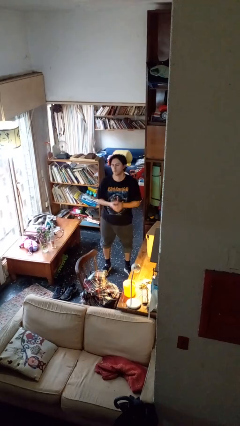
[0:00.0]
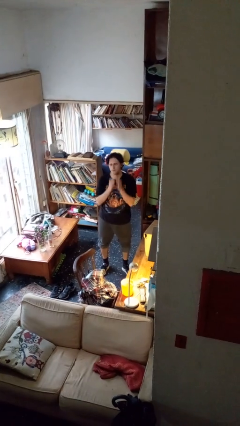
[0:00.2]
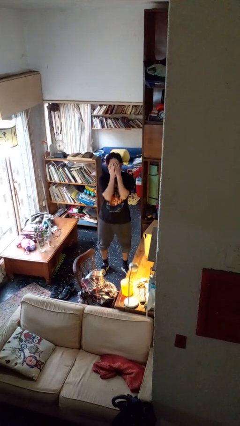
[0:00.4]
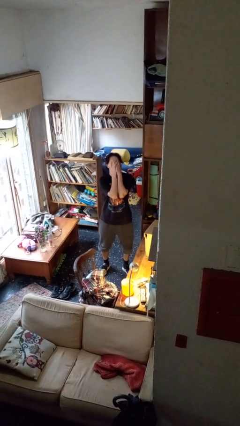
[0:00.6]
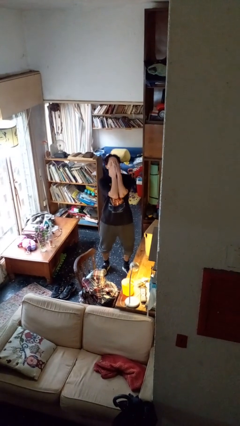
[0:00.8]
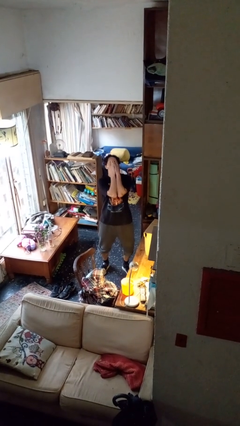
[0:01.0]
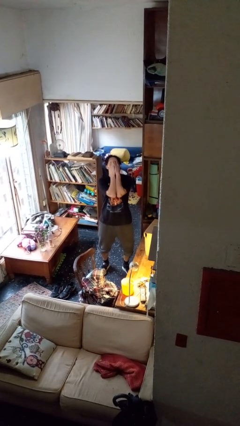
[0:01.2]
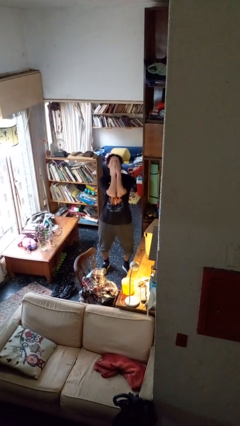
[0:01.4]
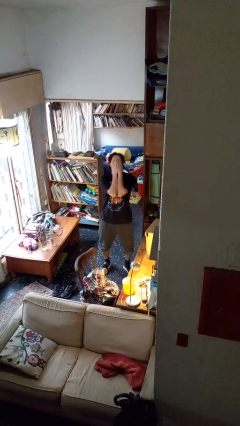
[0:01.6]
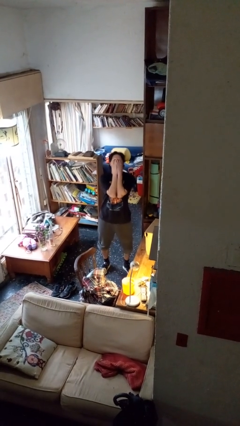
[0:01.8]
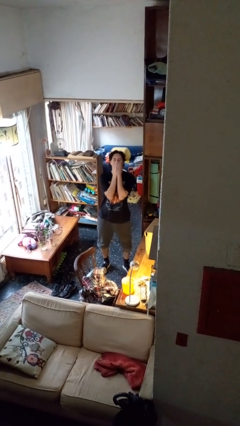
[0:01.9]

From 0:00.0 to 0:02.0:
person covers face with hands

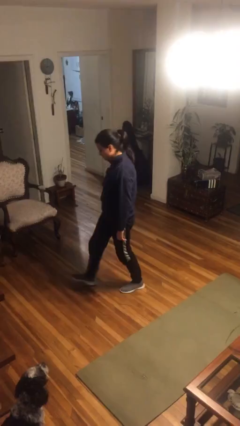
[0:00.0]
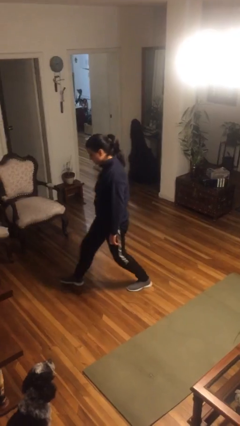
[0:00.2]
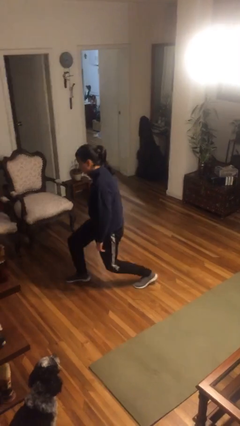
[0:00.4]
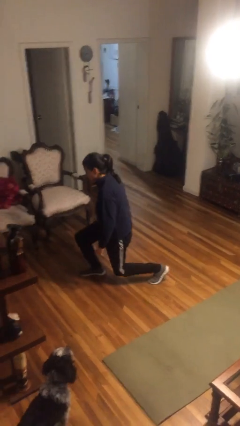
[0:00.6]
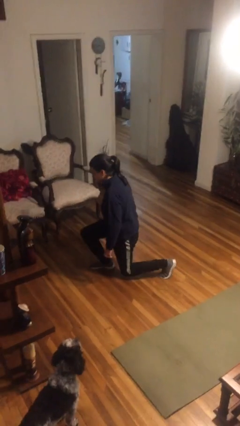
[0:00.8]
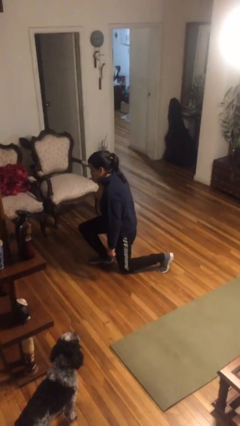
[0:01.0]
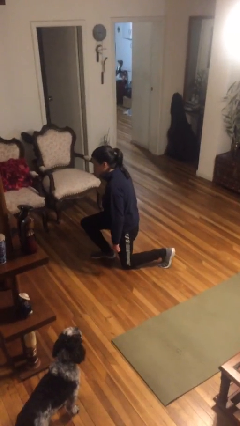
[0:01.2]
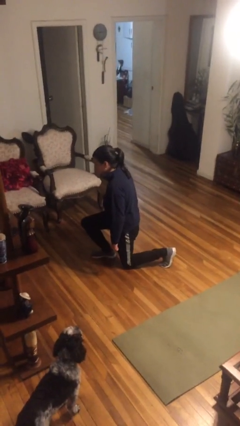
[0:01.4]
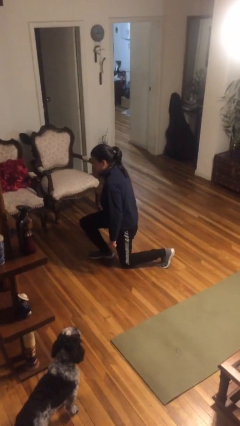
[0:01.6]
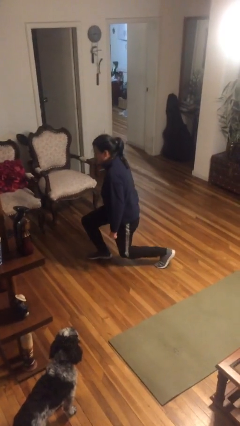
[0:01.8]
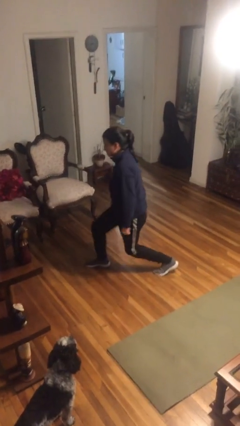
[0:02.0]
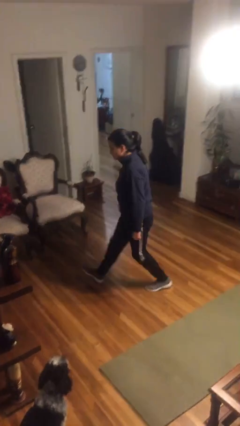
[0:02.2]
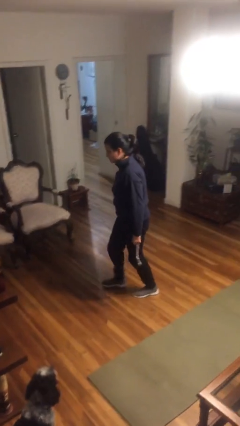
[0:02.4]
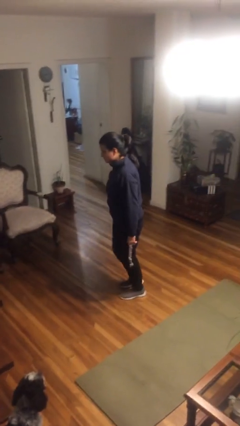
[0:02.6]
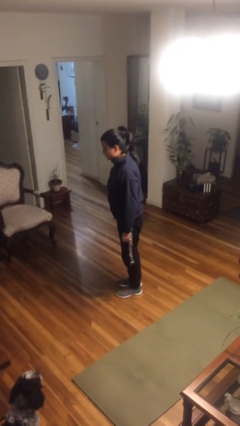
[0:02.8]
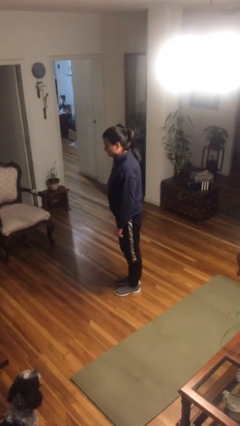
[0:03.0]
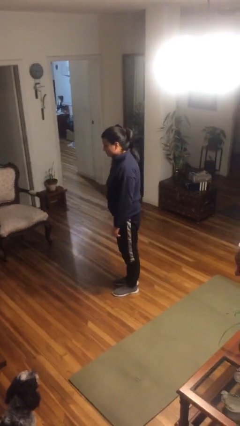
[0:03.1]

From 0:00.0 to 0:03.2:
person exercises with lunges

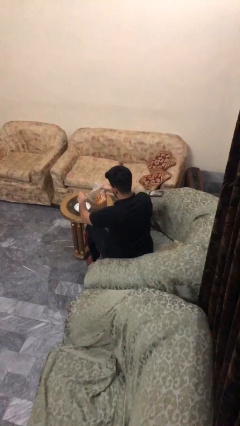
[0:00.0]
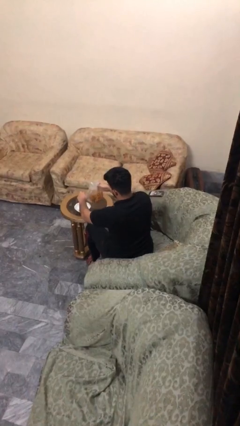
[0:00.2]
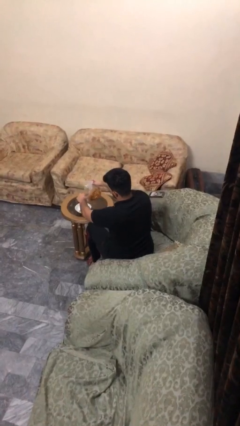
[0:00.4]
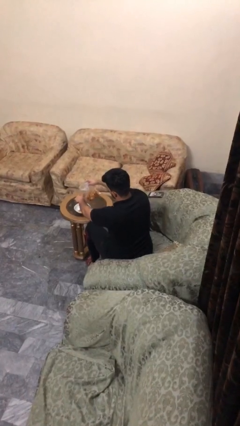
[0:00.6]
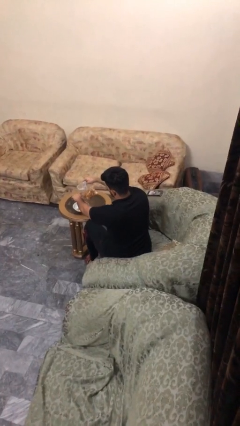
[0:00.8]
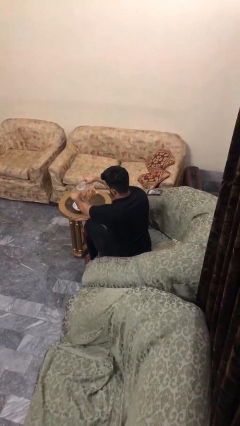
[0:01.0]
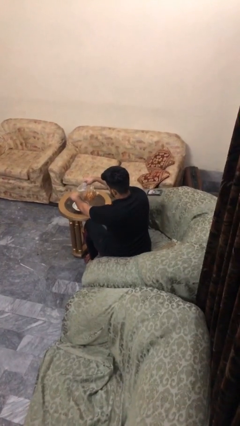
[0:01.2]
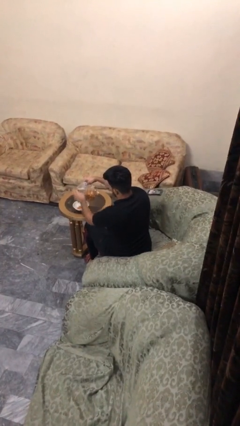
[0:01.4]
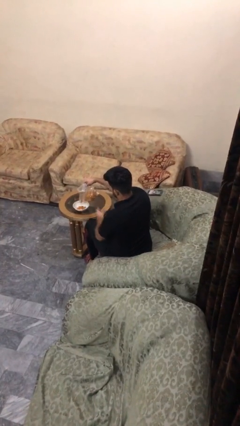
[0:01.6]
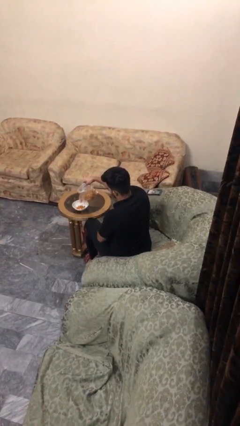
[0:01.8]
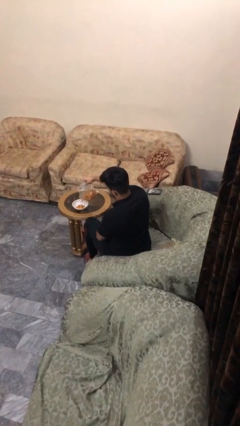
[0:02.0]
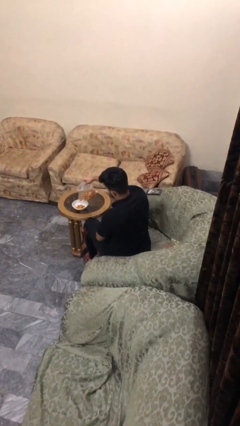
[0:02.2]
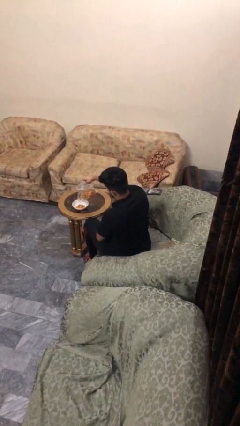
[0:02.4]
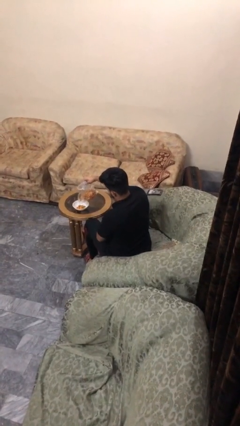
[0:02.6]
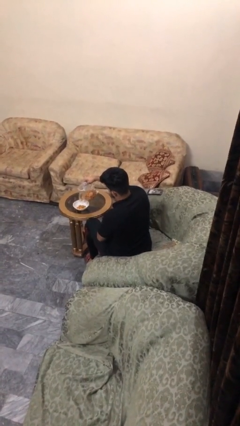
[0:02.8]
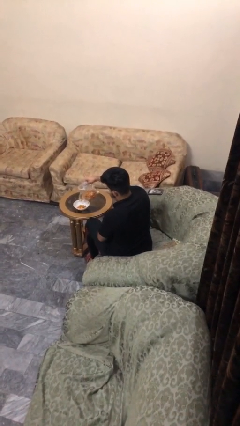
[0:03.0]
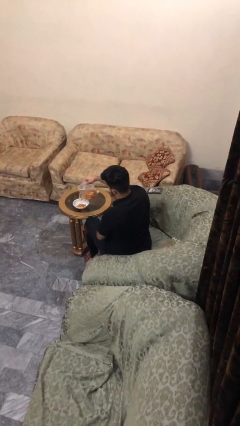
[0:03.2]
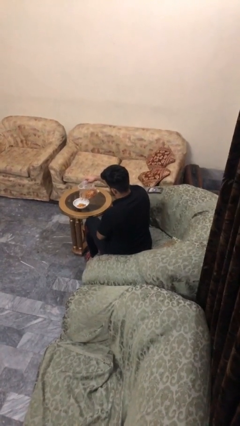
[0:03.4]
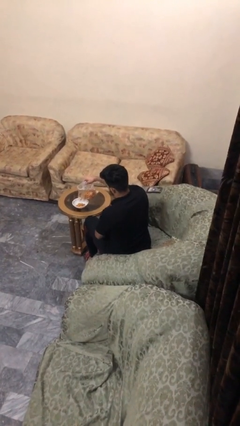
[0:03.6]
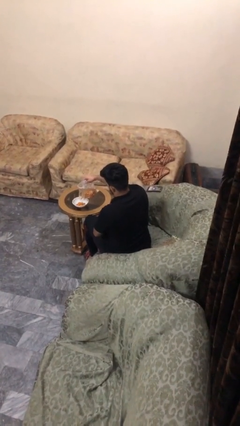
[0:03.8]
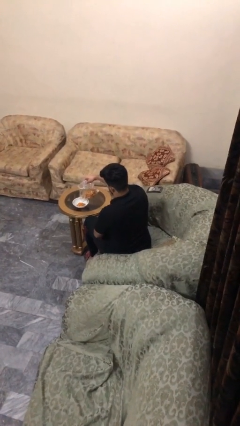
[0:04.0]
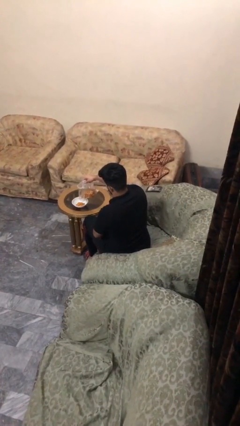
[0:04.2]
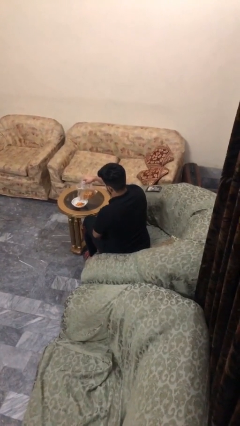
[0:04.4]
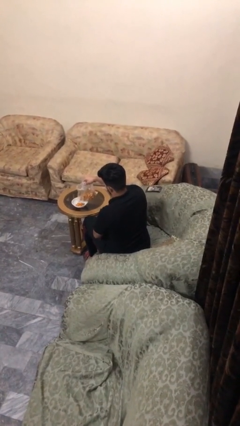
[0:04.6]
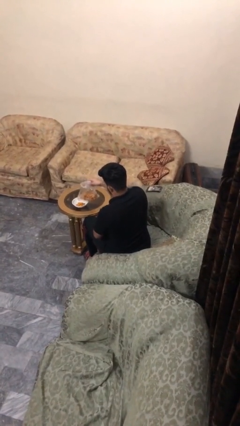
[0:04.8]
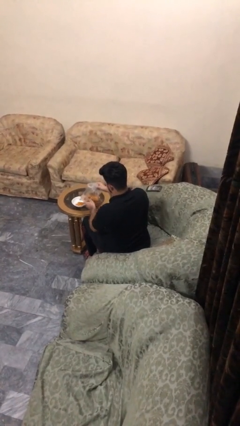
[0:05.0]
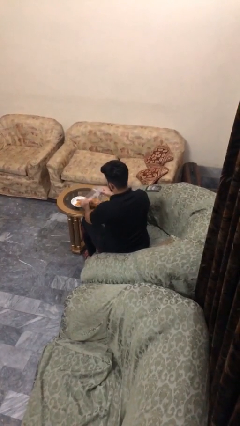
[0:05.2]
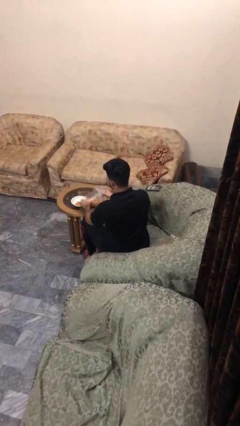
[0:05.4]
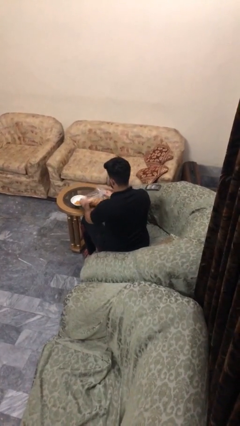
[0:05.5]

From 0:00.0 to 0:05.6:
person pours into bowl

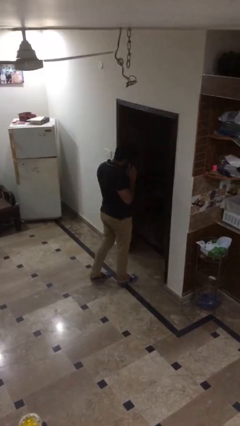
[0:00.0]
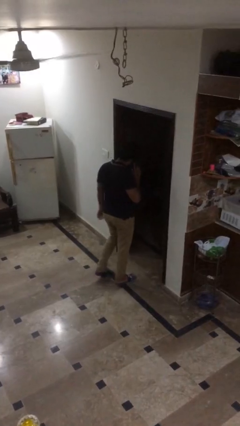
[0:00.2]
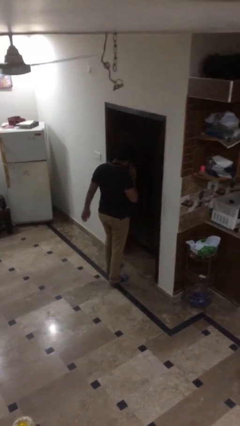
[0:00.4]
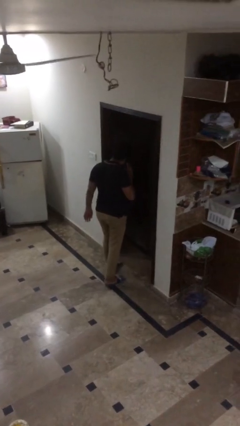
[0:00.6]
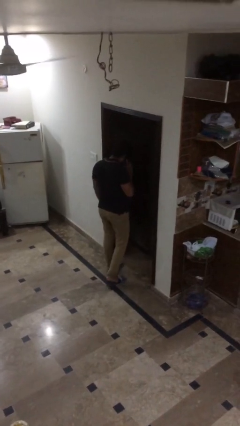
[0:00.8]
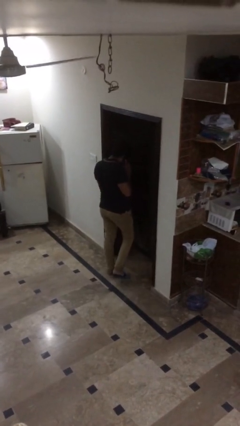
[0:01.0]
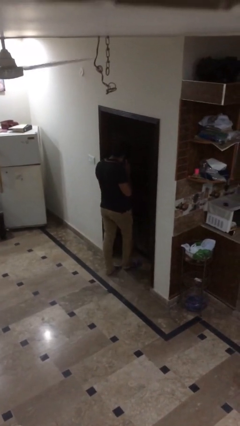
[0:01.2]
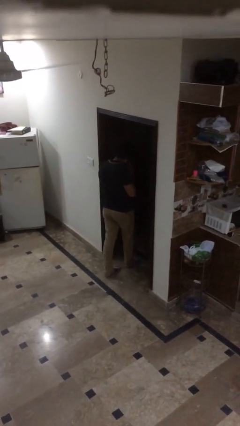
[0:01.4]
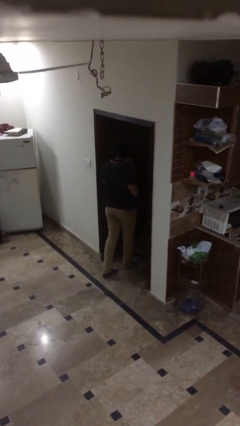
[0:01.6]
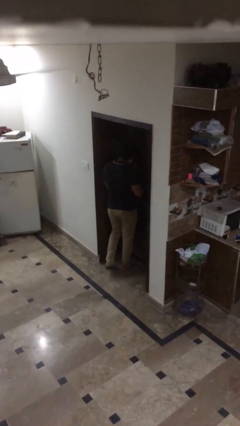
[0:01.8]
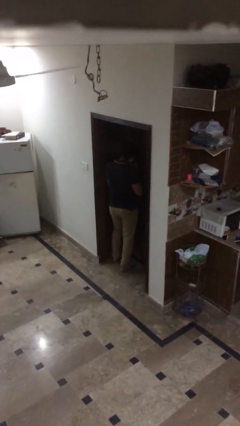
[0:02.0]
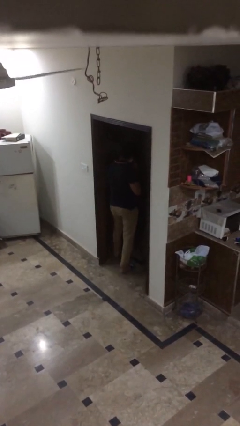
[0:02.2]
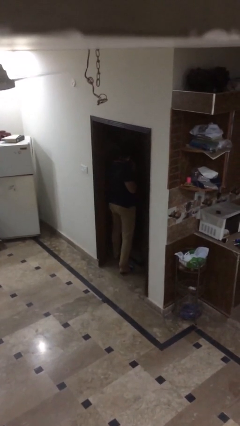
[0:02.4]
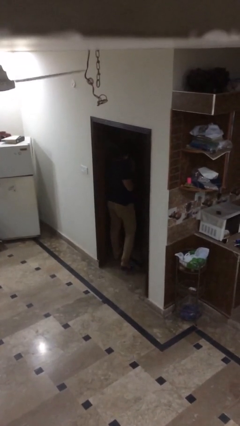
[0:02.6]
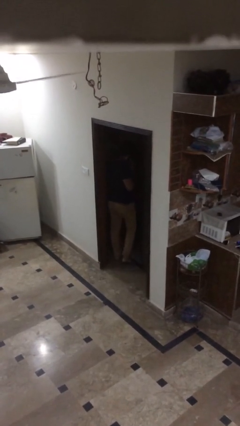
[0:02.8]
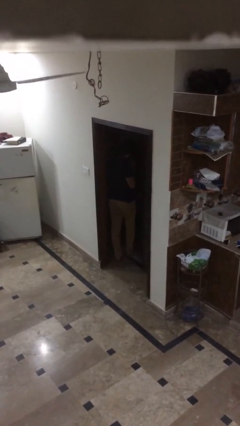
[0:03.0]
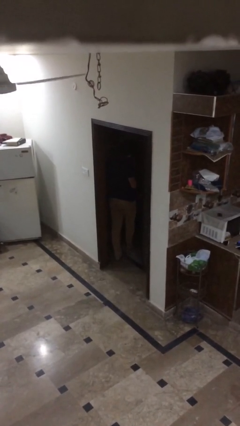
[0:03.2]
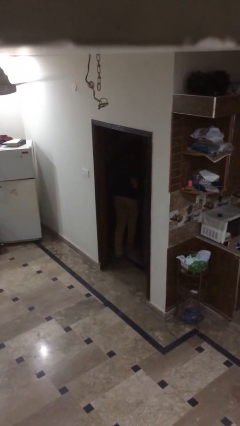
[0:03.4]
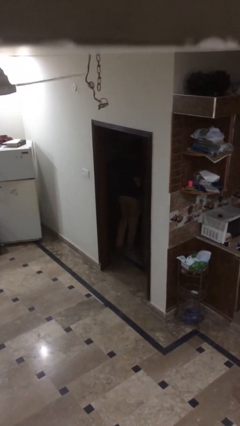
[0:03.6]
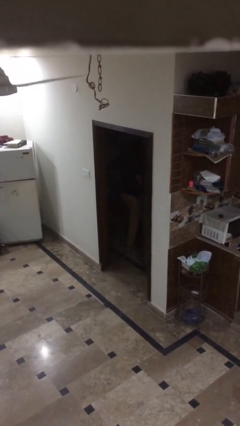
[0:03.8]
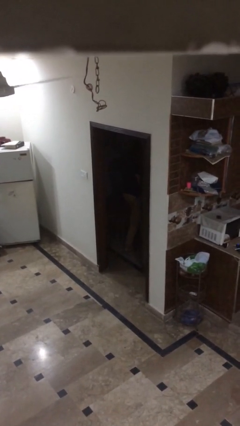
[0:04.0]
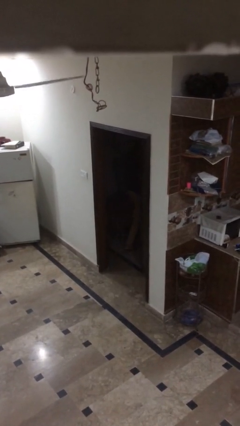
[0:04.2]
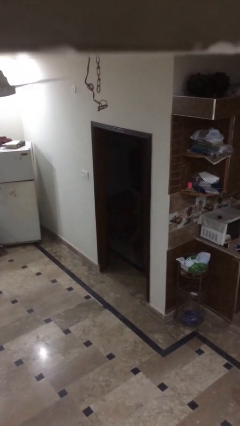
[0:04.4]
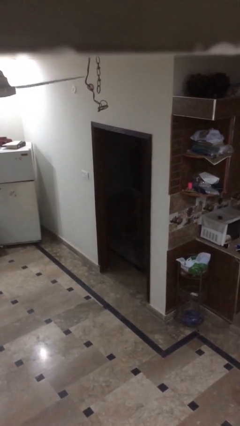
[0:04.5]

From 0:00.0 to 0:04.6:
person exits scene through structure

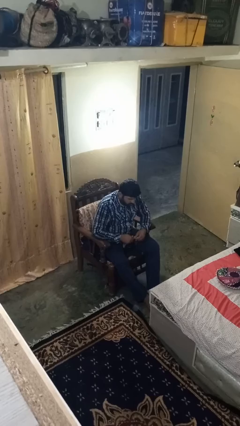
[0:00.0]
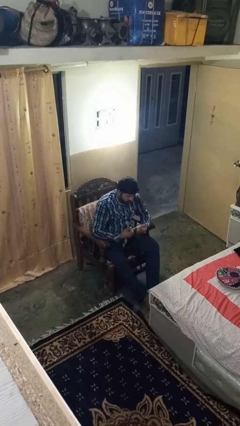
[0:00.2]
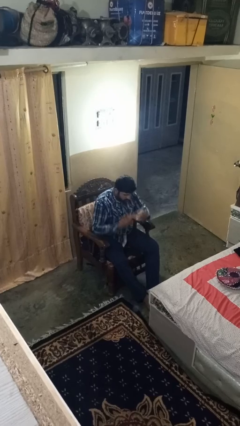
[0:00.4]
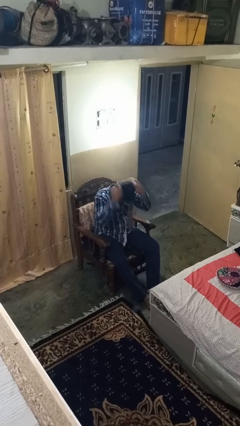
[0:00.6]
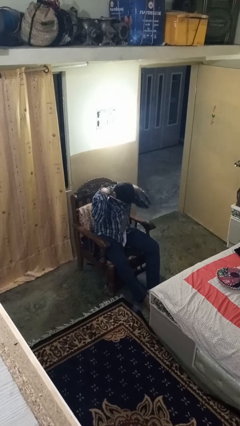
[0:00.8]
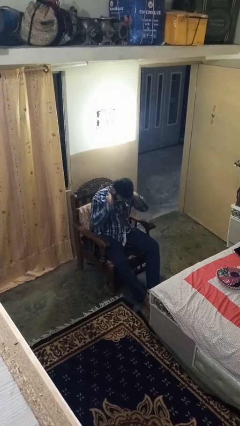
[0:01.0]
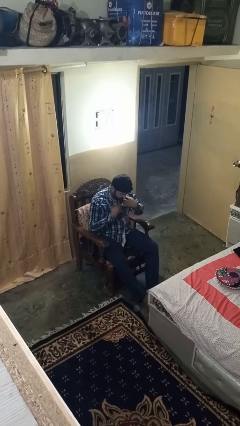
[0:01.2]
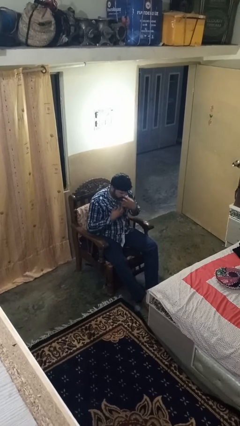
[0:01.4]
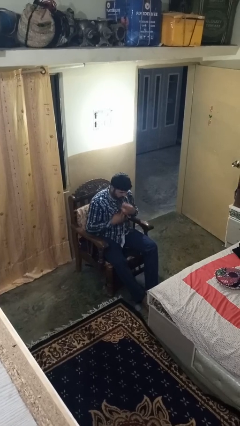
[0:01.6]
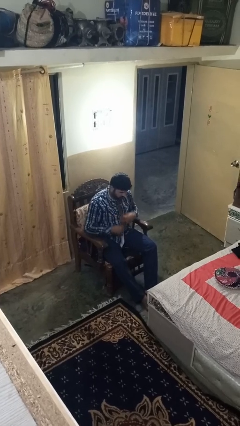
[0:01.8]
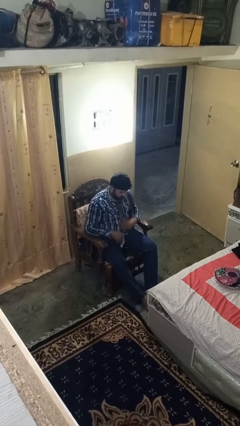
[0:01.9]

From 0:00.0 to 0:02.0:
person puts on necktie

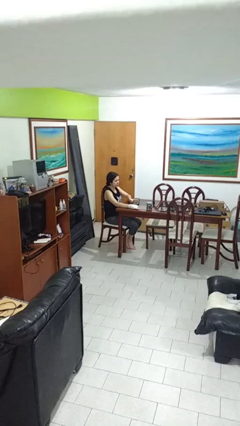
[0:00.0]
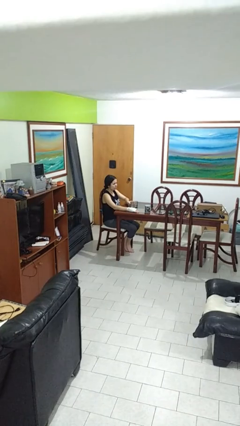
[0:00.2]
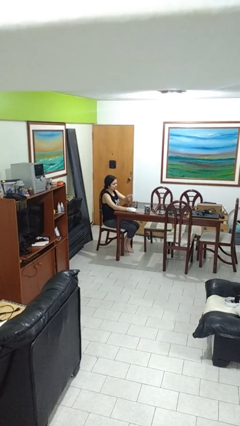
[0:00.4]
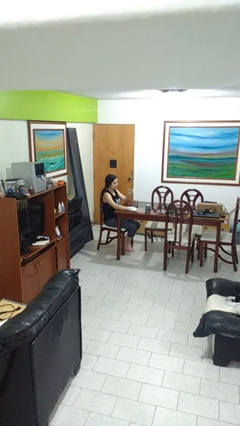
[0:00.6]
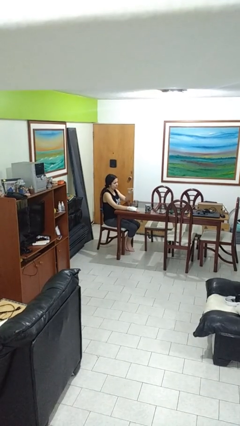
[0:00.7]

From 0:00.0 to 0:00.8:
person picks up object from table
